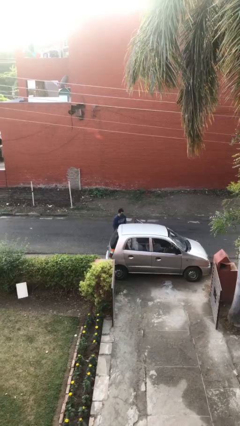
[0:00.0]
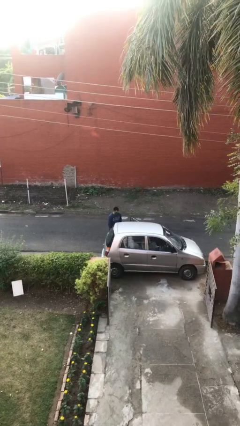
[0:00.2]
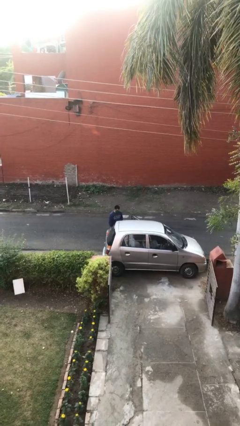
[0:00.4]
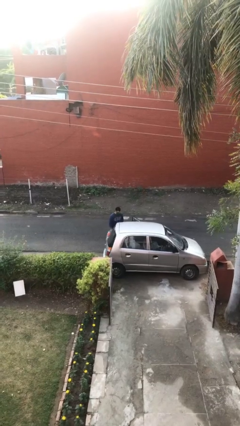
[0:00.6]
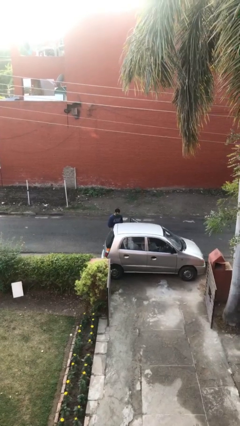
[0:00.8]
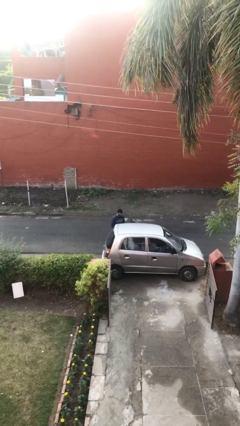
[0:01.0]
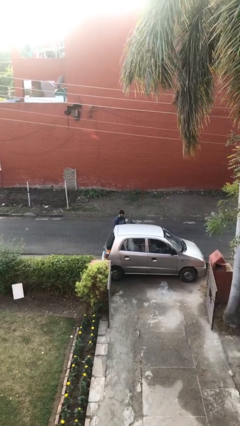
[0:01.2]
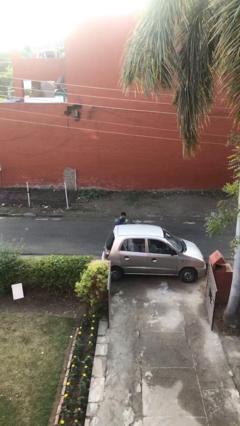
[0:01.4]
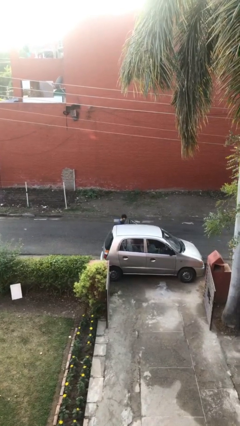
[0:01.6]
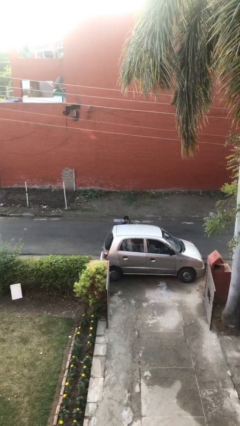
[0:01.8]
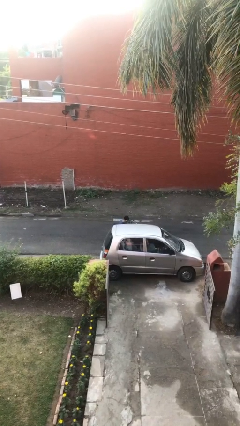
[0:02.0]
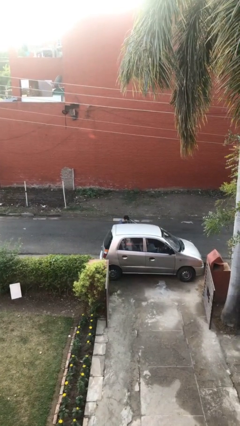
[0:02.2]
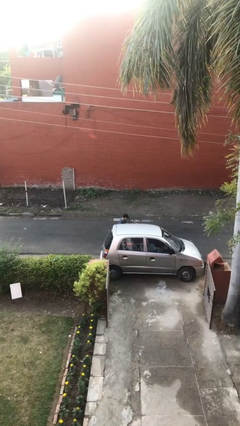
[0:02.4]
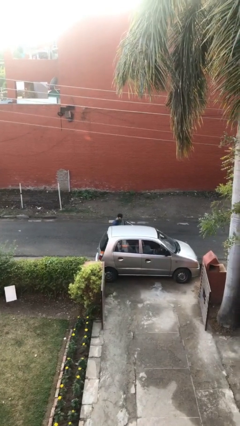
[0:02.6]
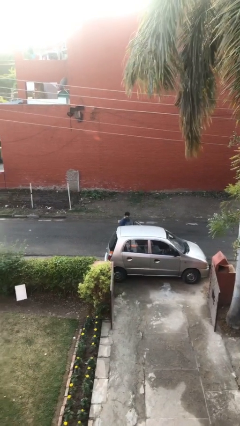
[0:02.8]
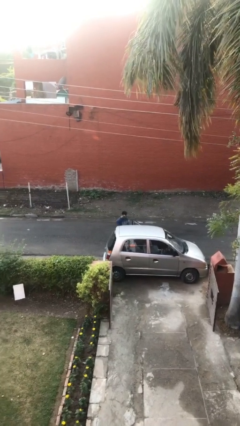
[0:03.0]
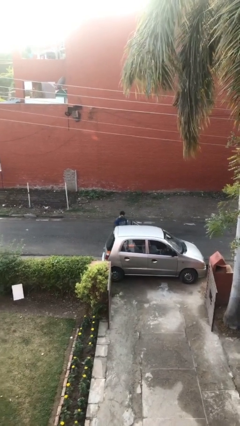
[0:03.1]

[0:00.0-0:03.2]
person loads car

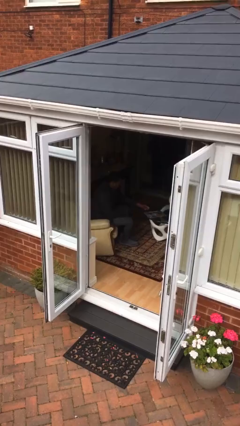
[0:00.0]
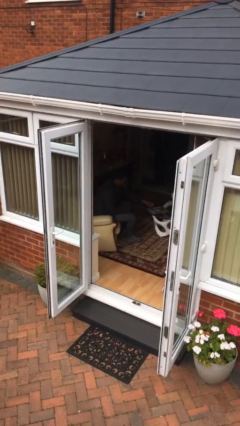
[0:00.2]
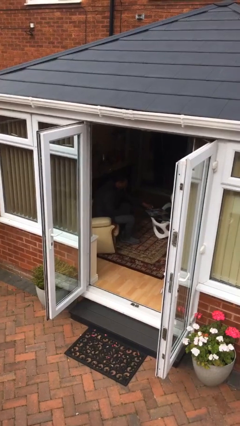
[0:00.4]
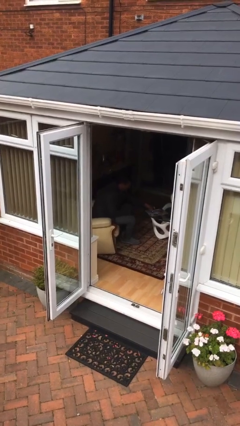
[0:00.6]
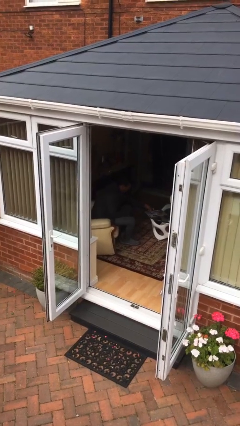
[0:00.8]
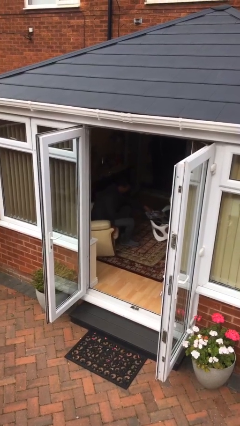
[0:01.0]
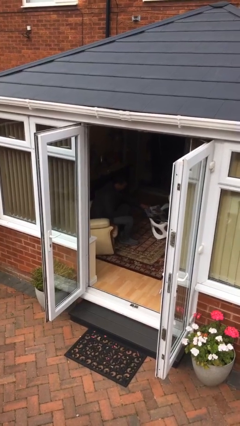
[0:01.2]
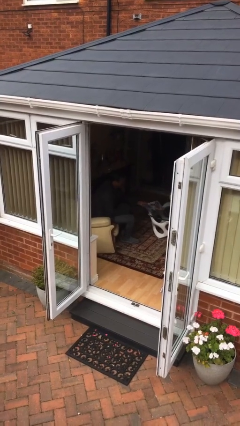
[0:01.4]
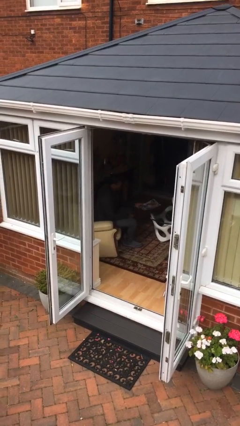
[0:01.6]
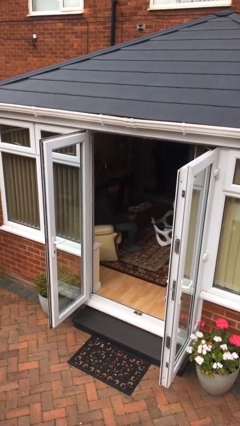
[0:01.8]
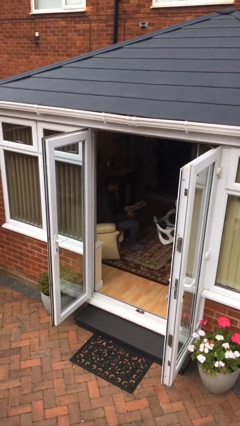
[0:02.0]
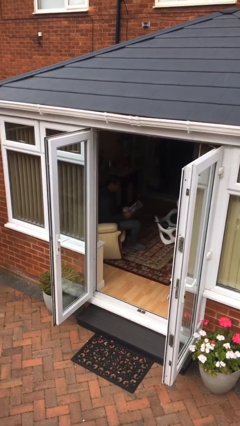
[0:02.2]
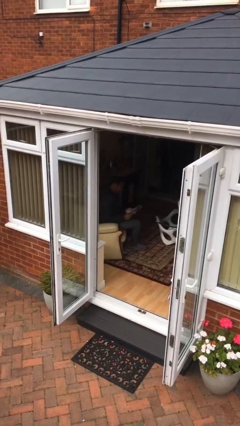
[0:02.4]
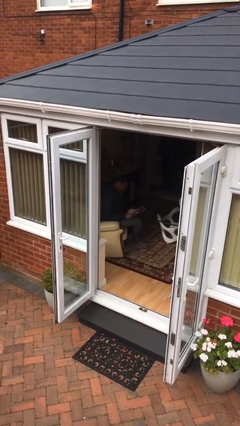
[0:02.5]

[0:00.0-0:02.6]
person picks up object from table

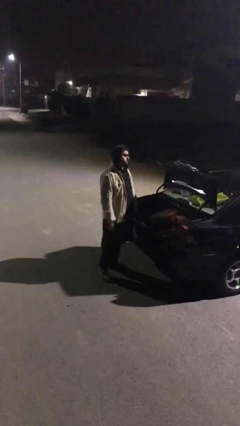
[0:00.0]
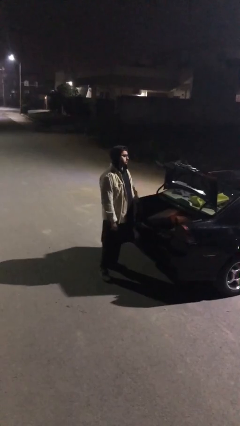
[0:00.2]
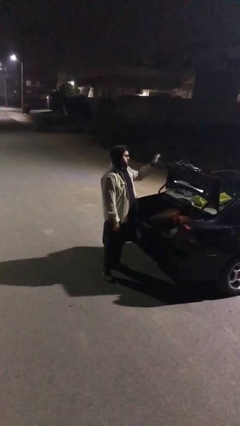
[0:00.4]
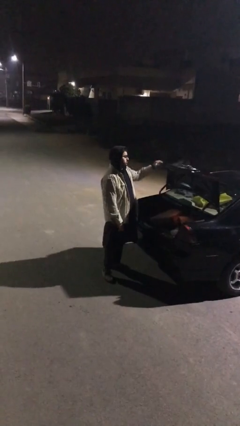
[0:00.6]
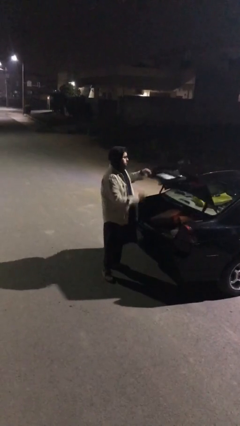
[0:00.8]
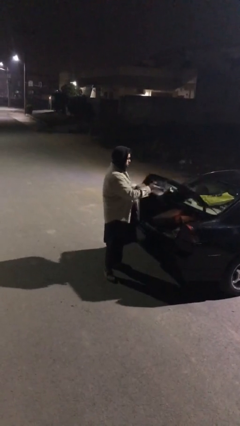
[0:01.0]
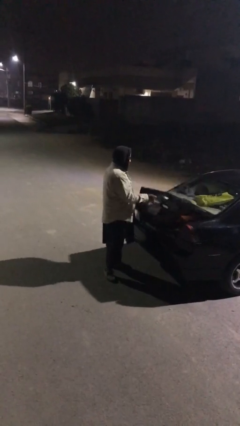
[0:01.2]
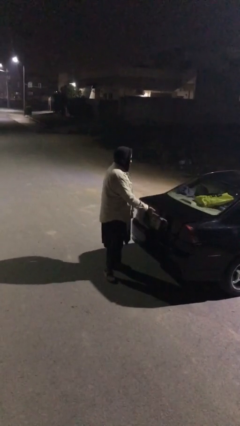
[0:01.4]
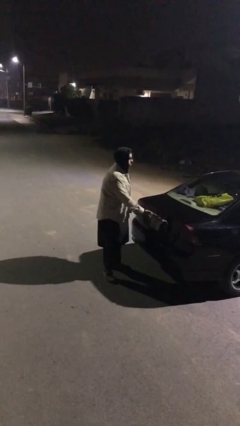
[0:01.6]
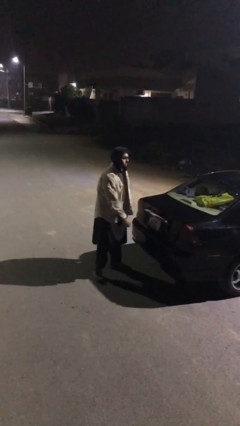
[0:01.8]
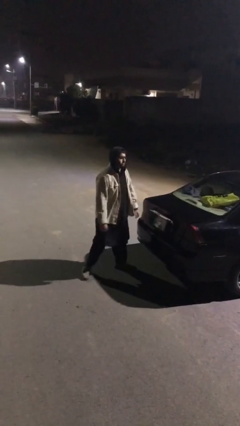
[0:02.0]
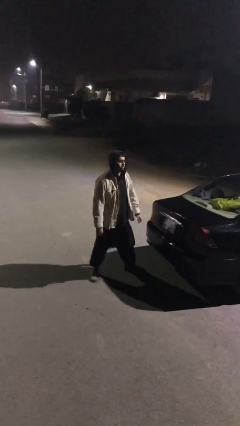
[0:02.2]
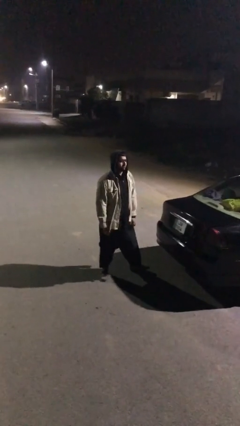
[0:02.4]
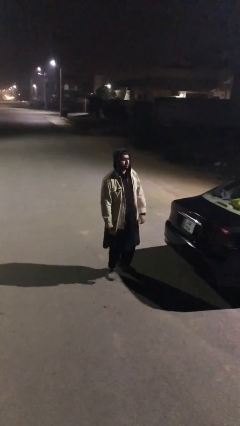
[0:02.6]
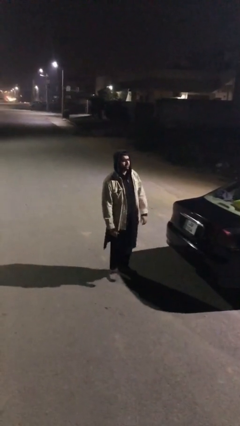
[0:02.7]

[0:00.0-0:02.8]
person closes car trunk

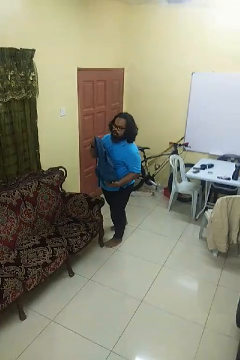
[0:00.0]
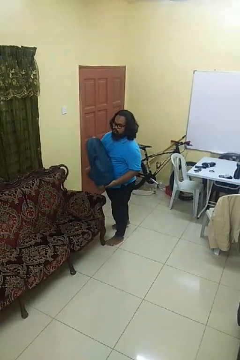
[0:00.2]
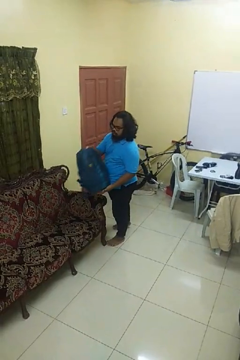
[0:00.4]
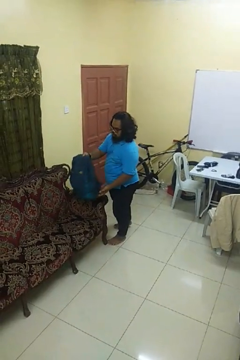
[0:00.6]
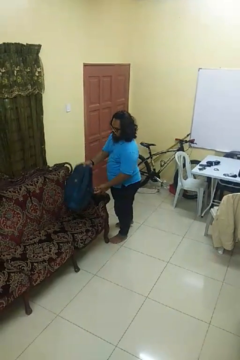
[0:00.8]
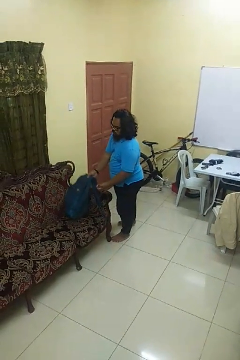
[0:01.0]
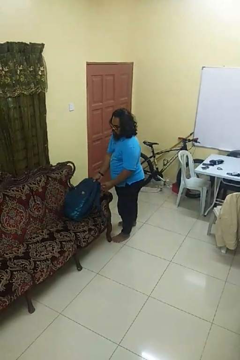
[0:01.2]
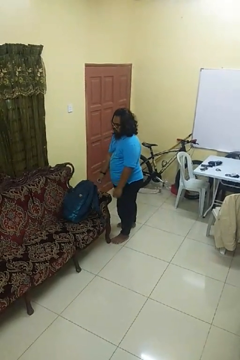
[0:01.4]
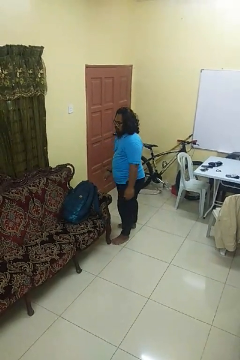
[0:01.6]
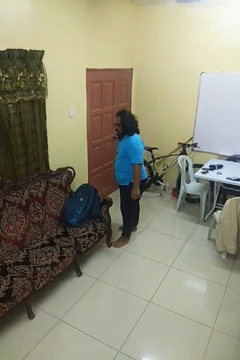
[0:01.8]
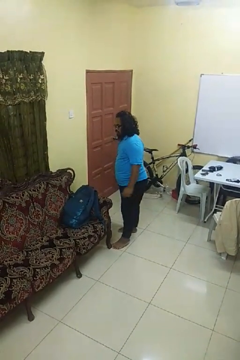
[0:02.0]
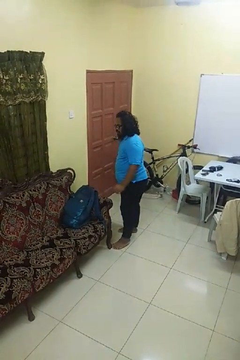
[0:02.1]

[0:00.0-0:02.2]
person puts down object on couch

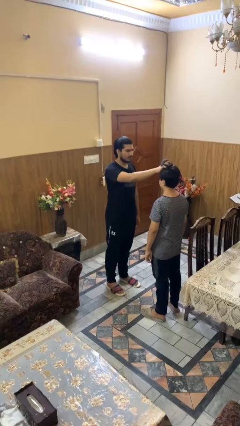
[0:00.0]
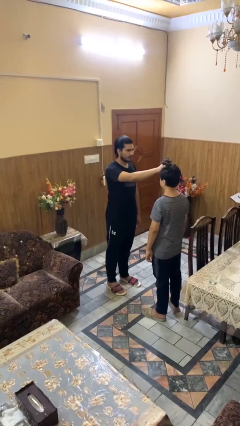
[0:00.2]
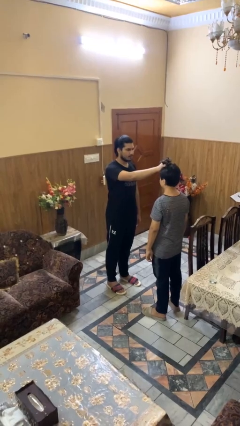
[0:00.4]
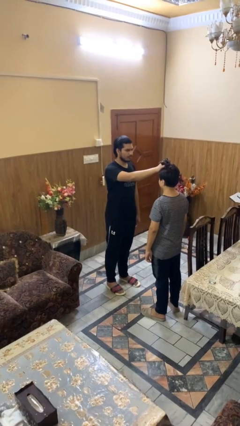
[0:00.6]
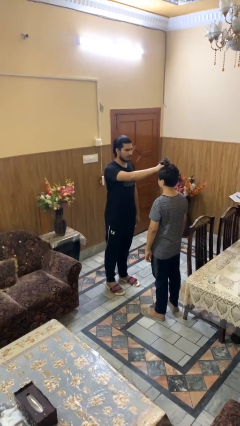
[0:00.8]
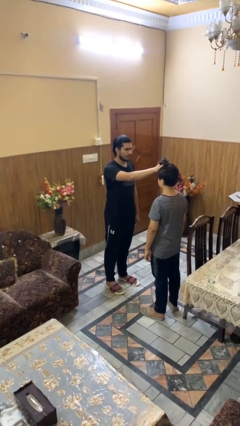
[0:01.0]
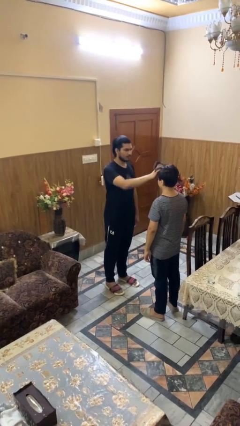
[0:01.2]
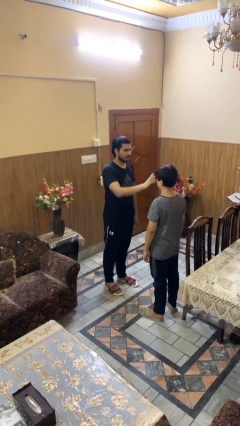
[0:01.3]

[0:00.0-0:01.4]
person grabs person by hair

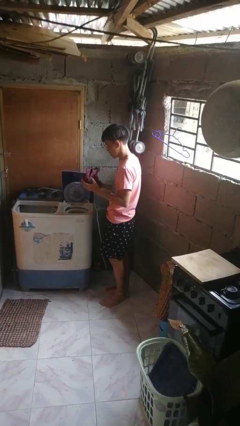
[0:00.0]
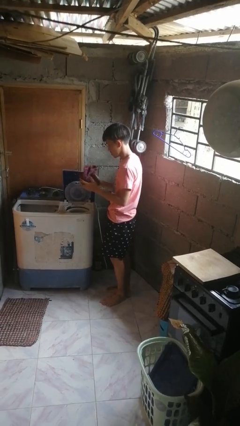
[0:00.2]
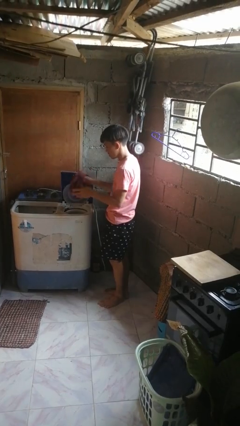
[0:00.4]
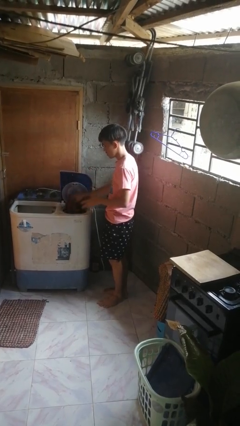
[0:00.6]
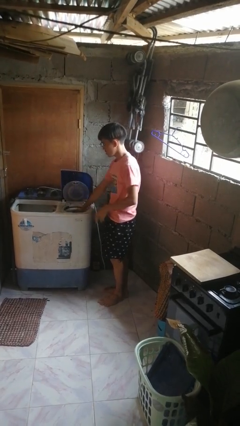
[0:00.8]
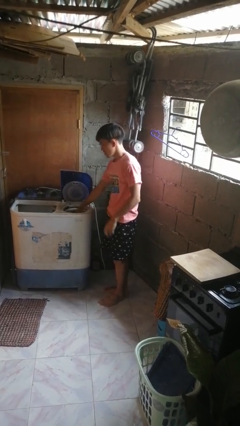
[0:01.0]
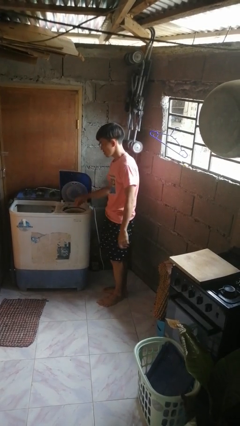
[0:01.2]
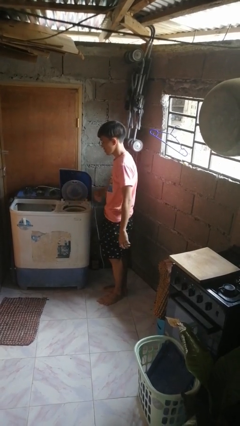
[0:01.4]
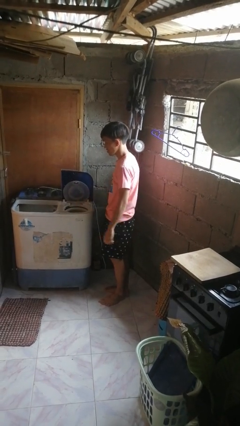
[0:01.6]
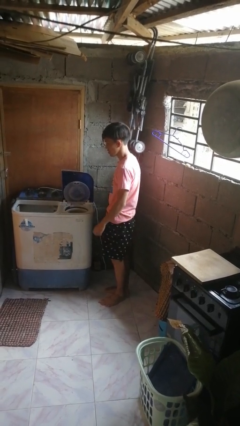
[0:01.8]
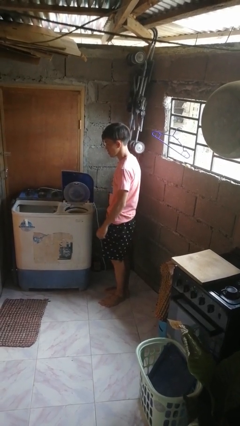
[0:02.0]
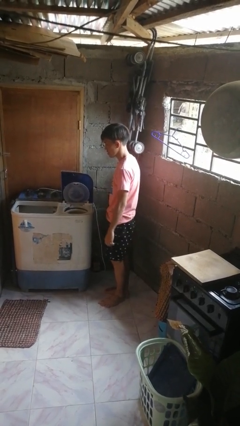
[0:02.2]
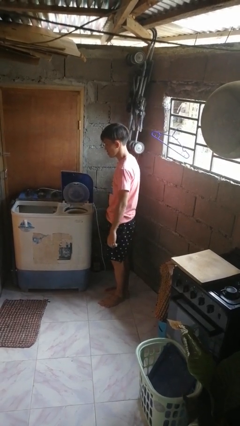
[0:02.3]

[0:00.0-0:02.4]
person loads dryer

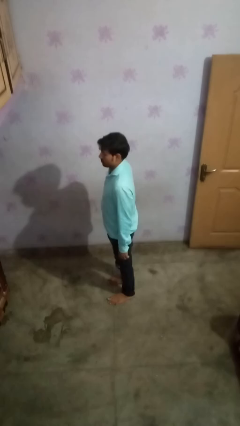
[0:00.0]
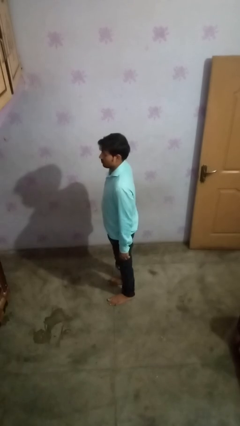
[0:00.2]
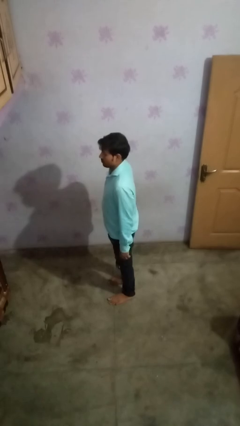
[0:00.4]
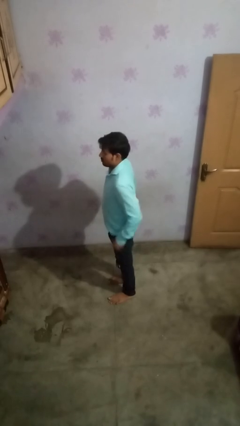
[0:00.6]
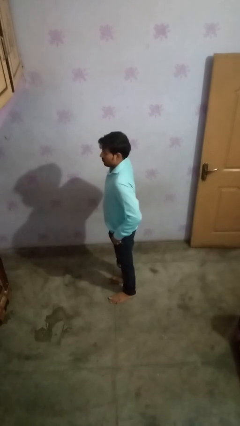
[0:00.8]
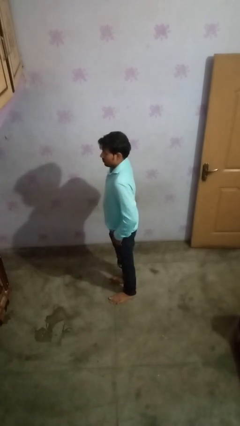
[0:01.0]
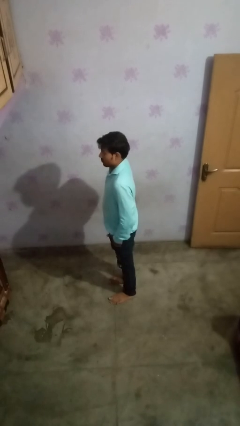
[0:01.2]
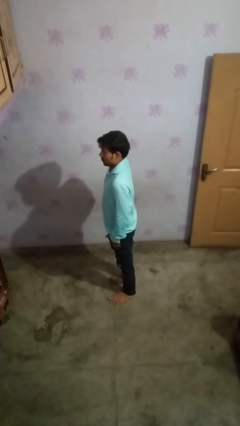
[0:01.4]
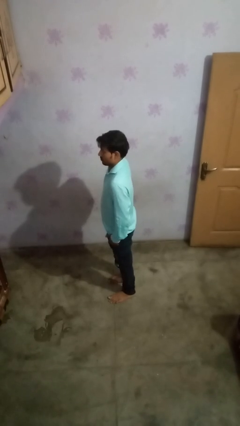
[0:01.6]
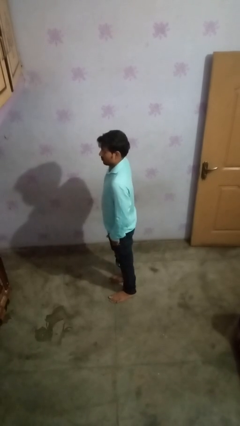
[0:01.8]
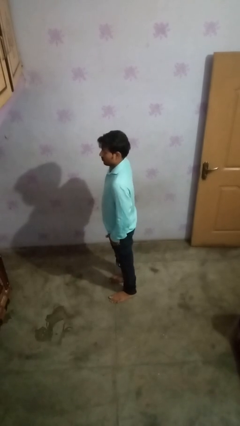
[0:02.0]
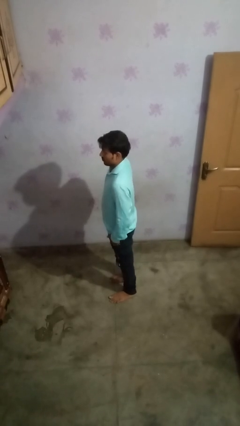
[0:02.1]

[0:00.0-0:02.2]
person puts hands in back pockets

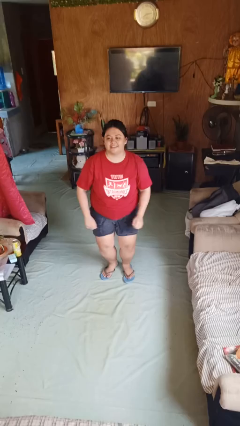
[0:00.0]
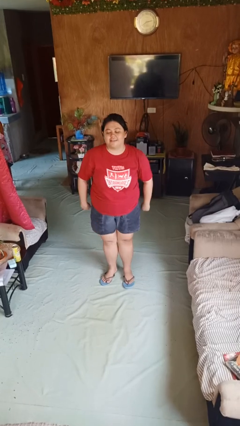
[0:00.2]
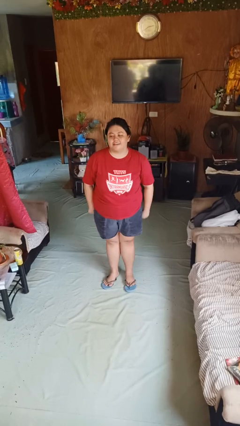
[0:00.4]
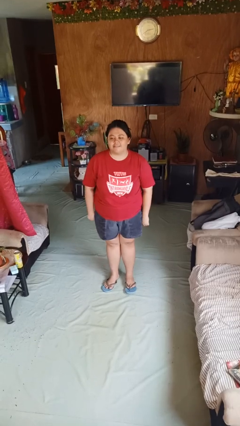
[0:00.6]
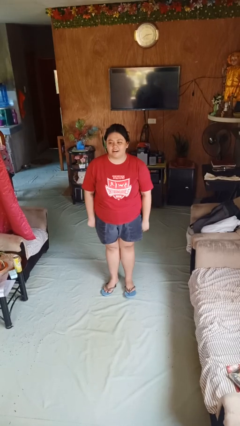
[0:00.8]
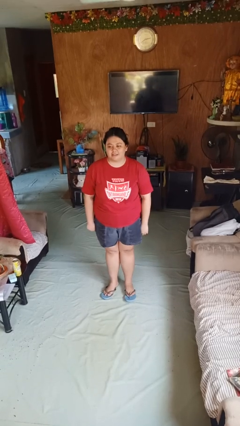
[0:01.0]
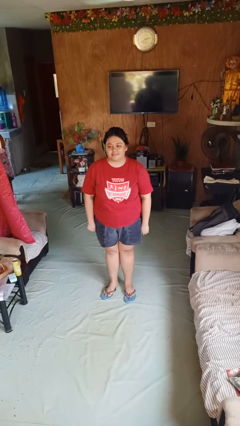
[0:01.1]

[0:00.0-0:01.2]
person stands up
